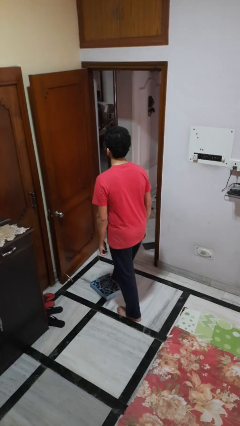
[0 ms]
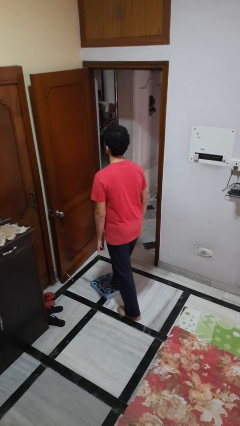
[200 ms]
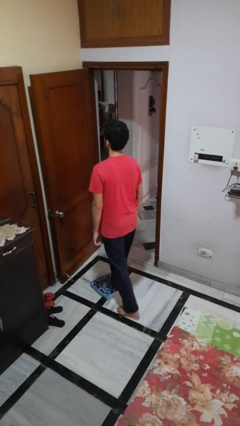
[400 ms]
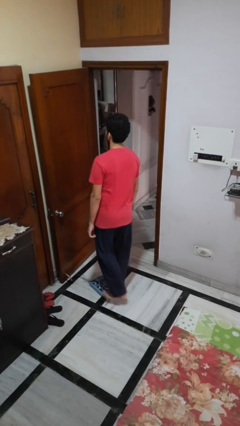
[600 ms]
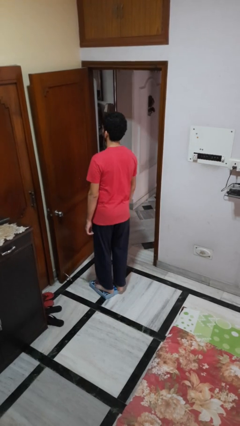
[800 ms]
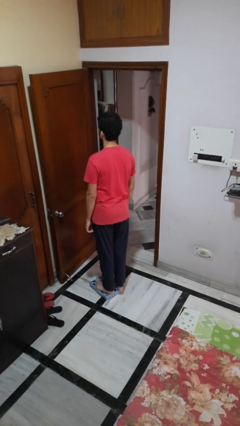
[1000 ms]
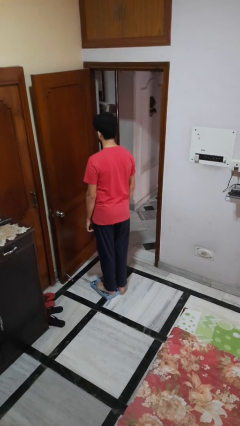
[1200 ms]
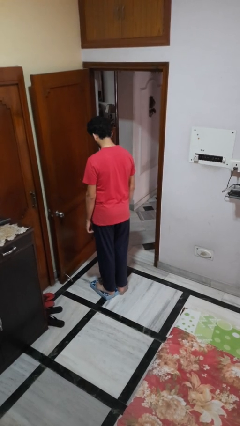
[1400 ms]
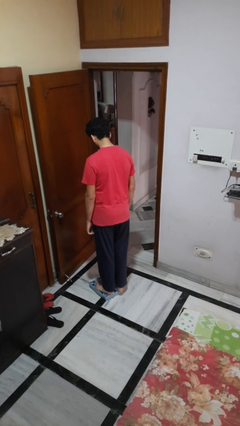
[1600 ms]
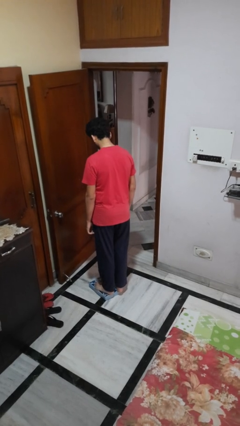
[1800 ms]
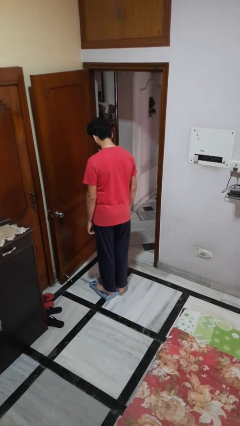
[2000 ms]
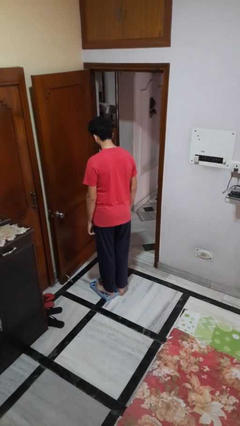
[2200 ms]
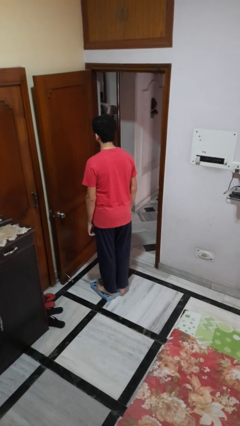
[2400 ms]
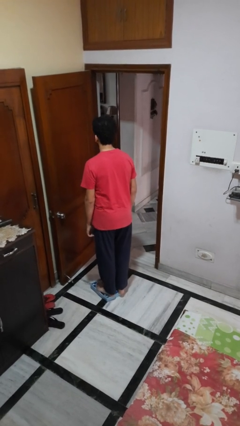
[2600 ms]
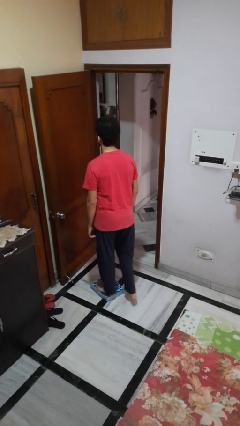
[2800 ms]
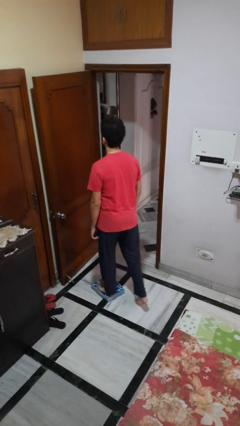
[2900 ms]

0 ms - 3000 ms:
person uses bodyweight scale

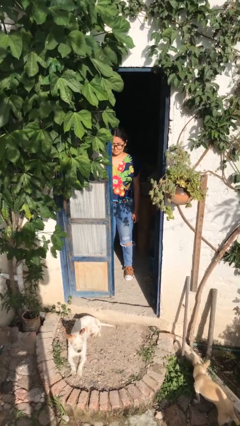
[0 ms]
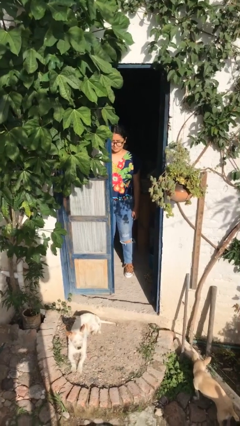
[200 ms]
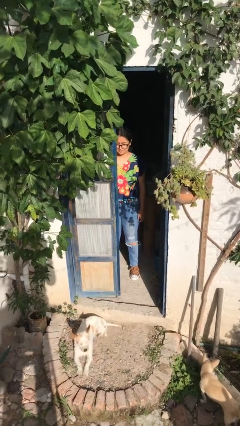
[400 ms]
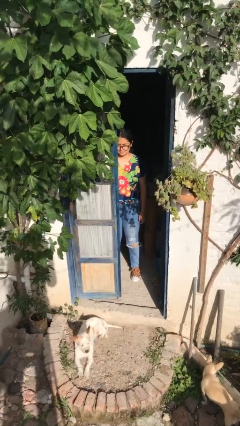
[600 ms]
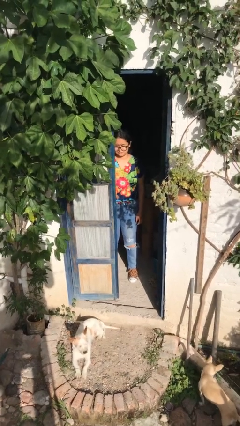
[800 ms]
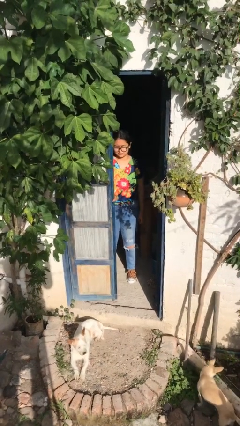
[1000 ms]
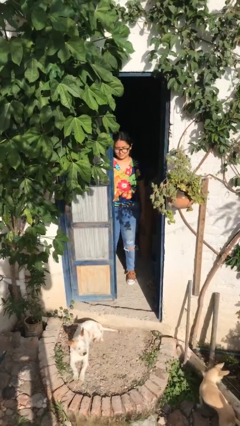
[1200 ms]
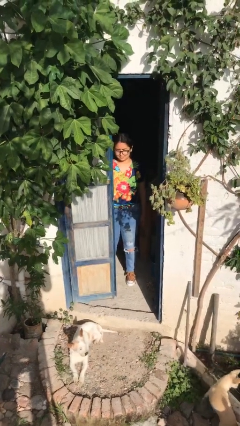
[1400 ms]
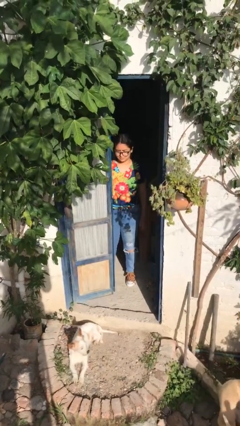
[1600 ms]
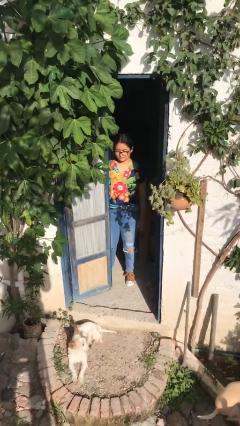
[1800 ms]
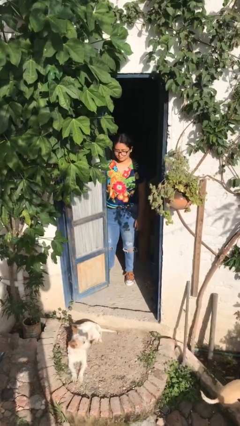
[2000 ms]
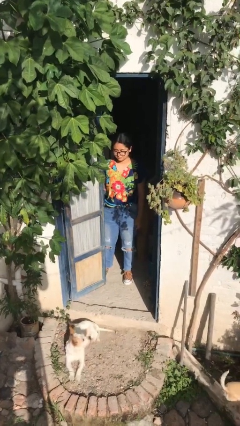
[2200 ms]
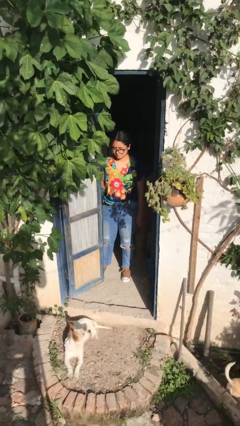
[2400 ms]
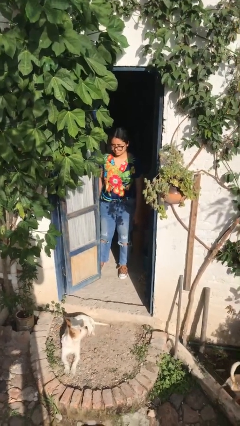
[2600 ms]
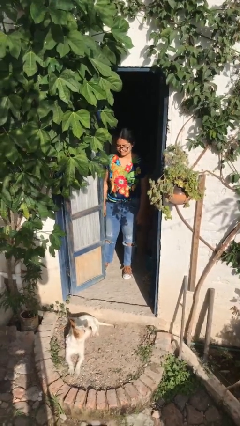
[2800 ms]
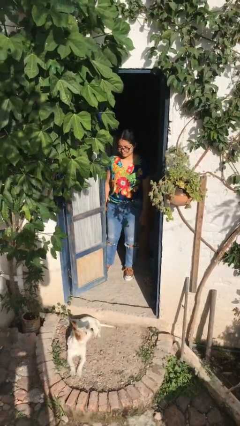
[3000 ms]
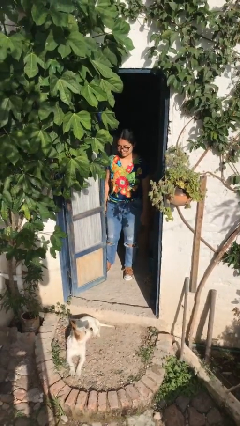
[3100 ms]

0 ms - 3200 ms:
person opens facility door

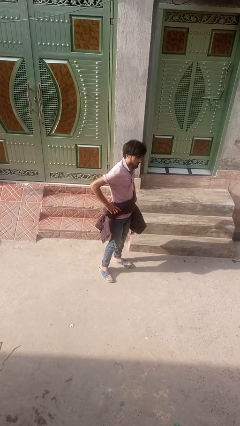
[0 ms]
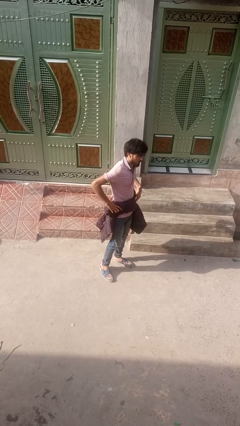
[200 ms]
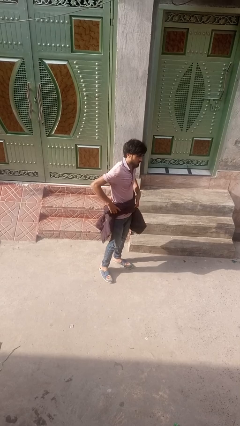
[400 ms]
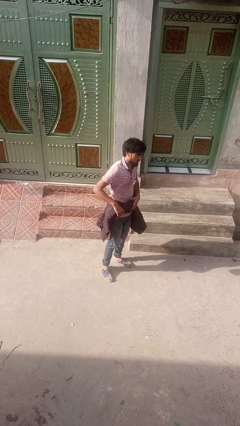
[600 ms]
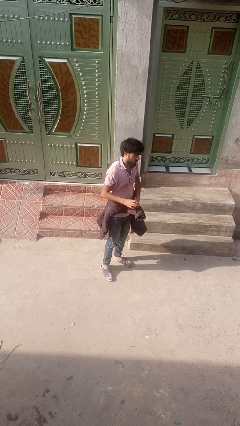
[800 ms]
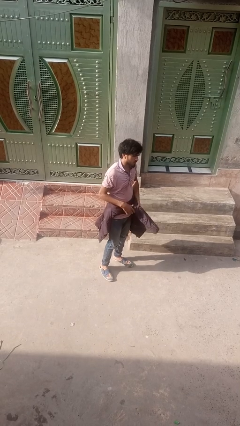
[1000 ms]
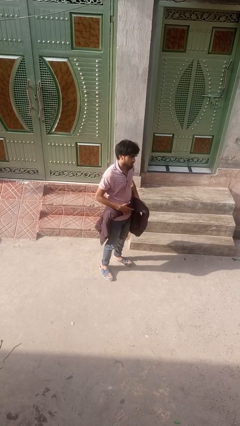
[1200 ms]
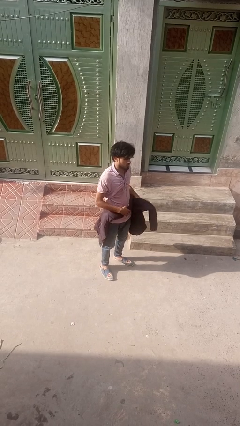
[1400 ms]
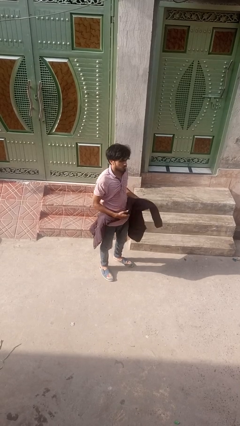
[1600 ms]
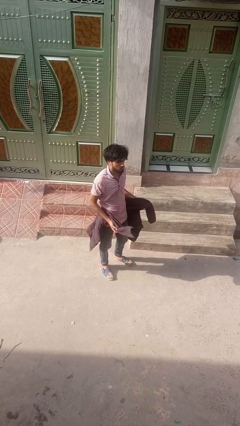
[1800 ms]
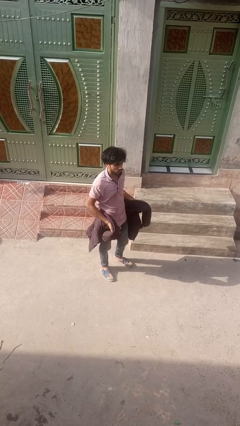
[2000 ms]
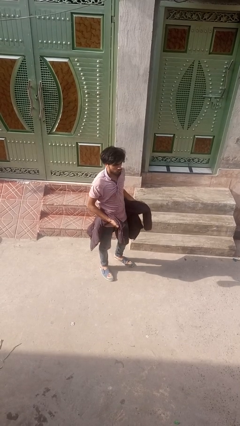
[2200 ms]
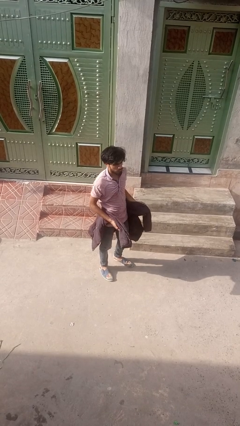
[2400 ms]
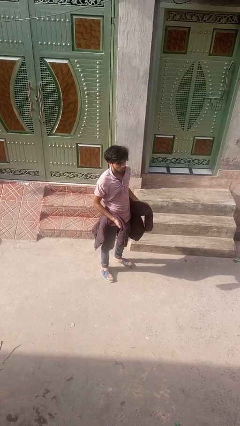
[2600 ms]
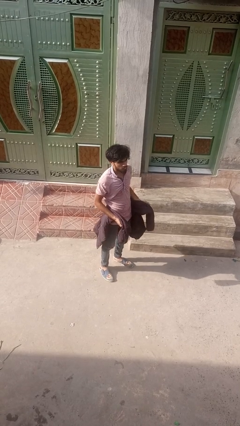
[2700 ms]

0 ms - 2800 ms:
person unties jacket around waist

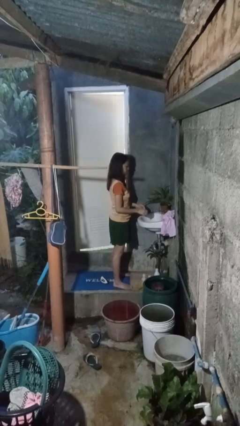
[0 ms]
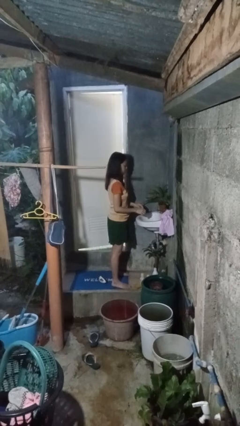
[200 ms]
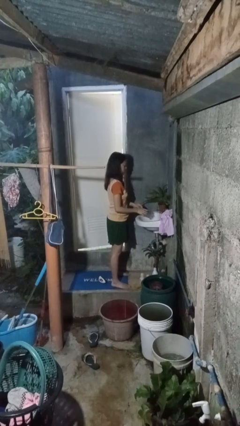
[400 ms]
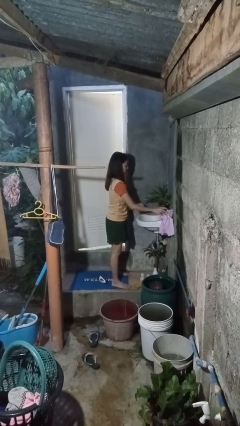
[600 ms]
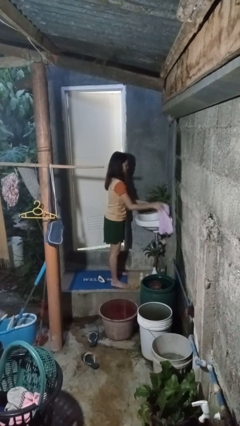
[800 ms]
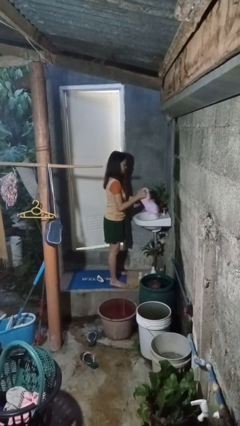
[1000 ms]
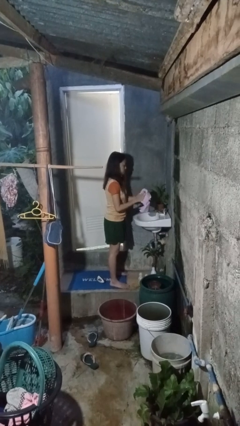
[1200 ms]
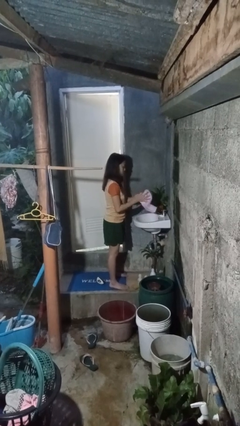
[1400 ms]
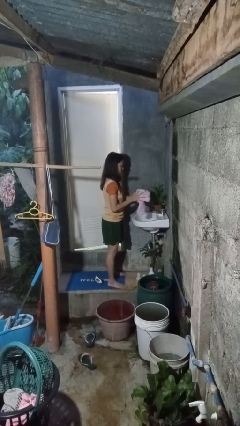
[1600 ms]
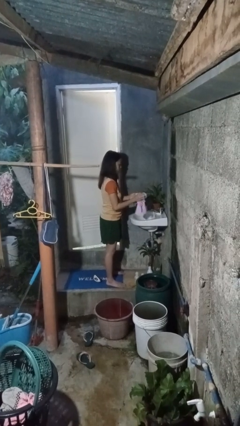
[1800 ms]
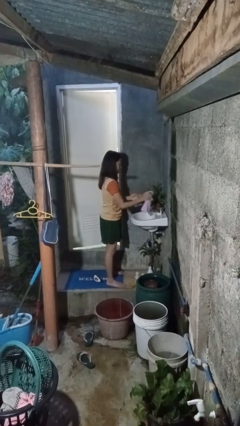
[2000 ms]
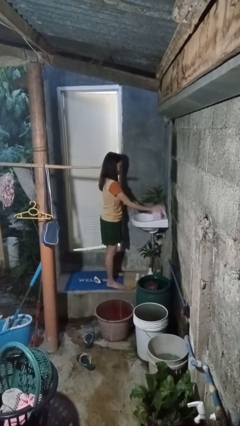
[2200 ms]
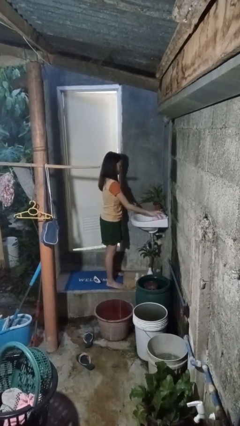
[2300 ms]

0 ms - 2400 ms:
person dries hands with towel

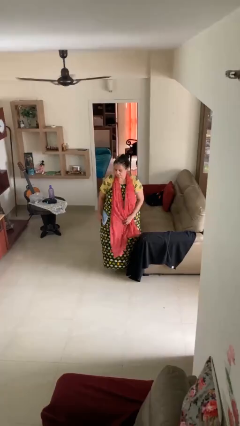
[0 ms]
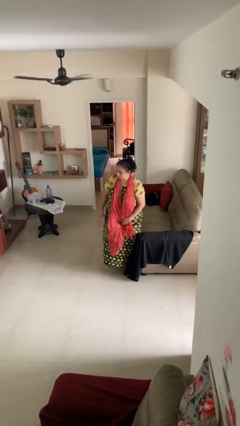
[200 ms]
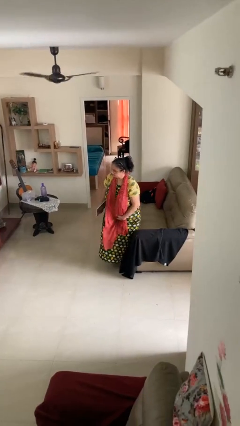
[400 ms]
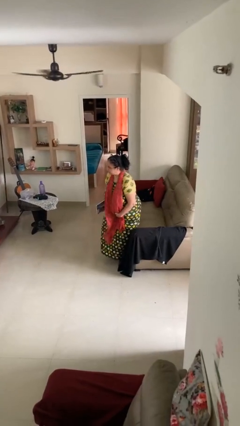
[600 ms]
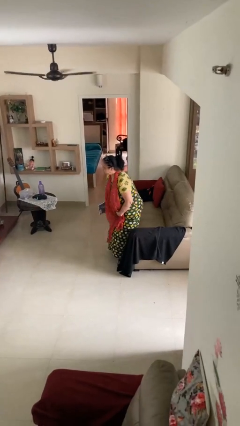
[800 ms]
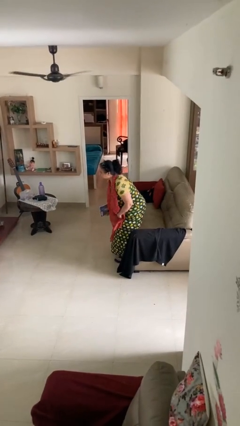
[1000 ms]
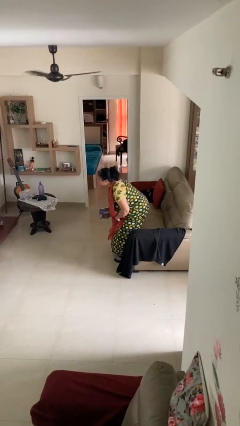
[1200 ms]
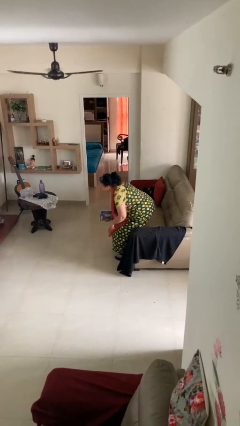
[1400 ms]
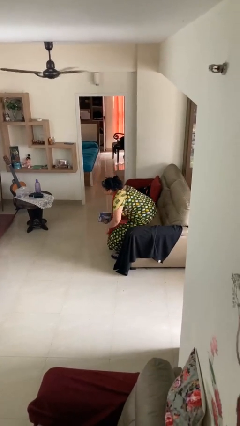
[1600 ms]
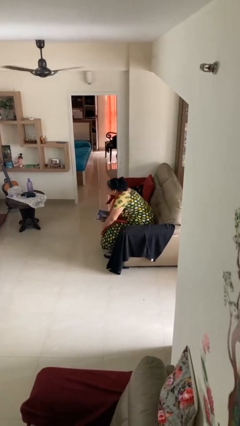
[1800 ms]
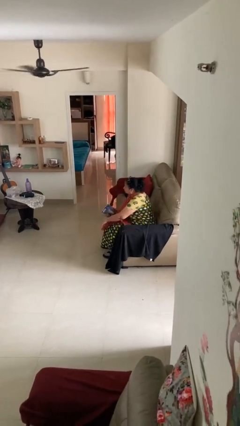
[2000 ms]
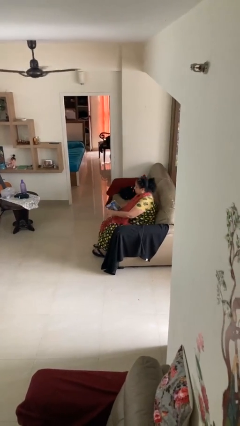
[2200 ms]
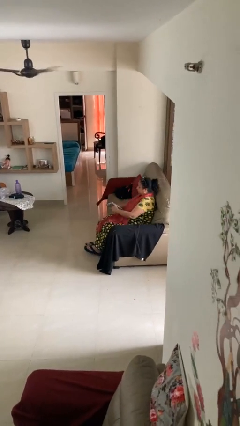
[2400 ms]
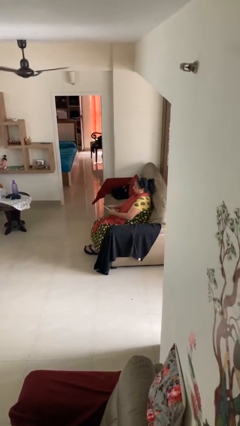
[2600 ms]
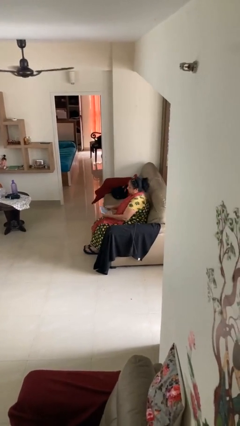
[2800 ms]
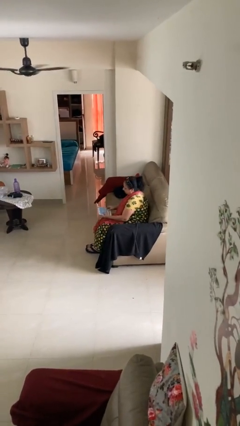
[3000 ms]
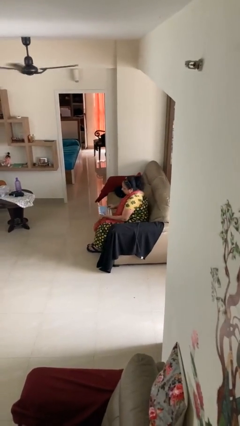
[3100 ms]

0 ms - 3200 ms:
person sits down

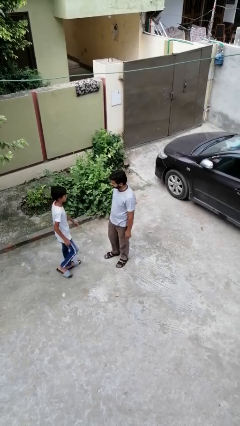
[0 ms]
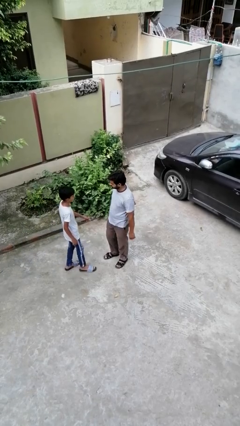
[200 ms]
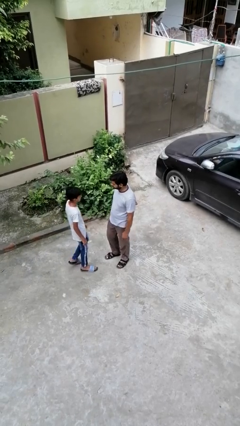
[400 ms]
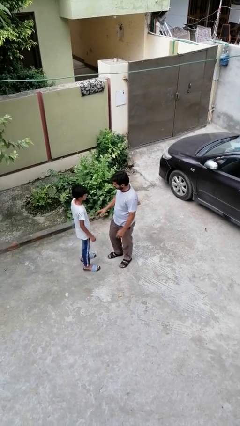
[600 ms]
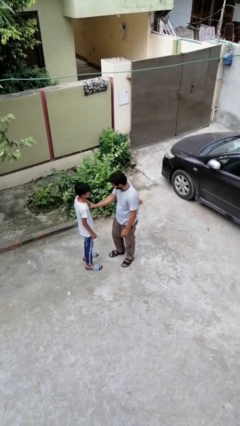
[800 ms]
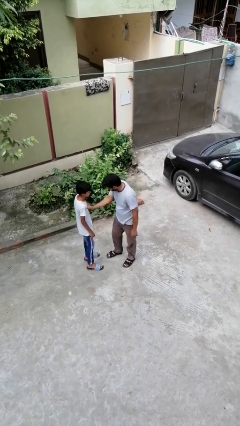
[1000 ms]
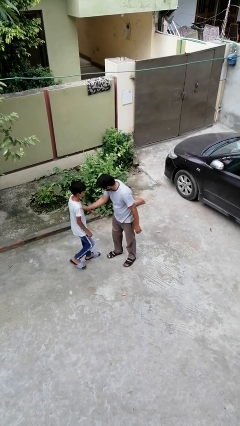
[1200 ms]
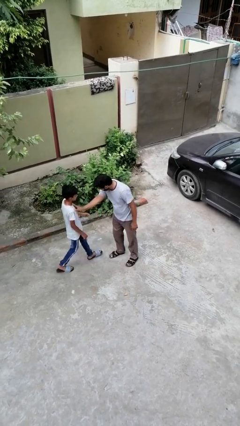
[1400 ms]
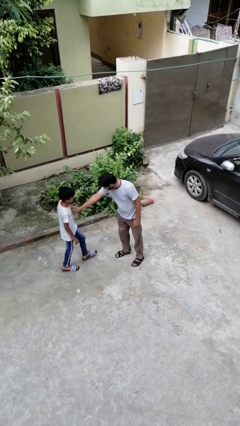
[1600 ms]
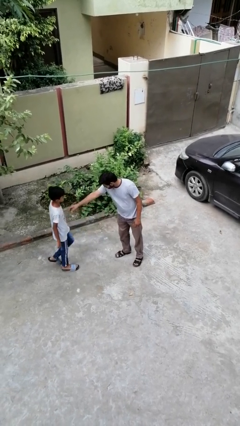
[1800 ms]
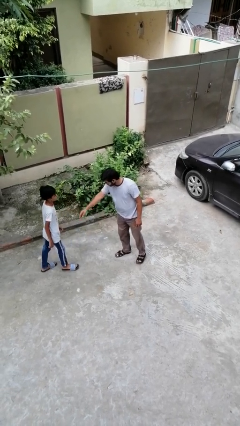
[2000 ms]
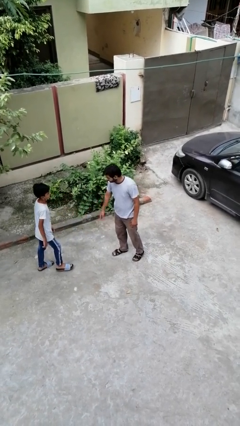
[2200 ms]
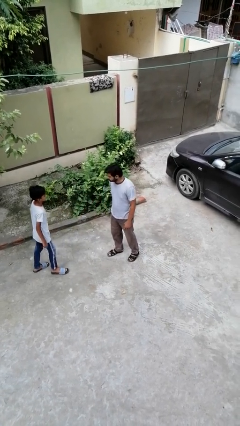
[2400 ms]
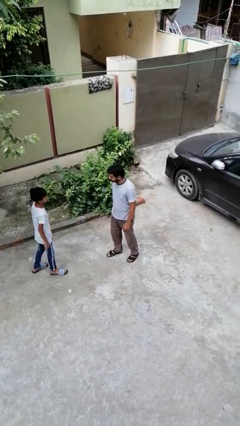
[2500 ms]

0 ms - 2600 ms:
person shoves person

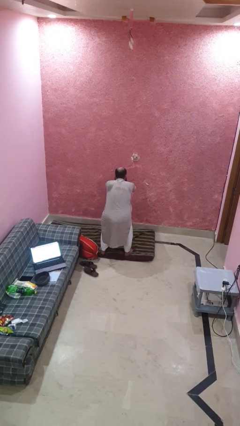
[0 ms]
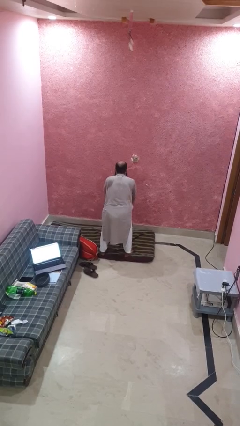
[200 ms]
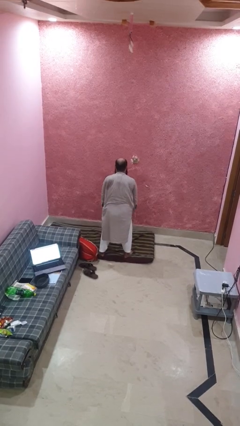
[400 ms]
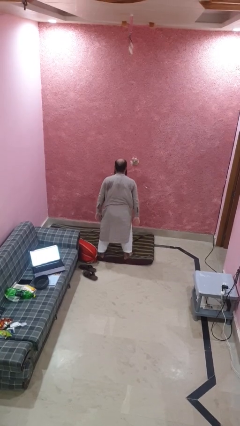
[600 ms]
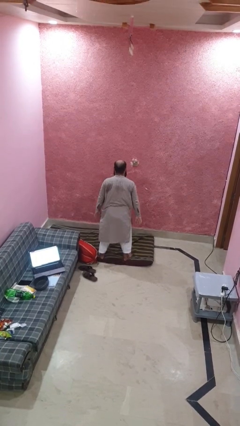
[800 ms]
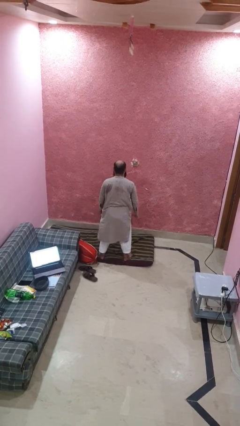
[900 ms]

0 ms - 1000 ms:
person stands up
